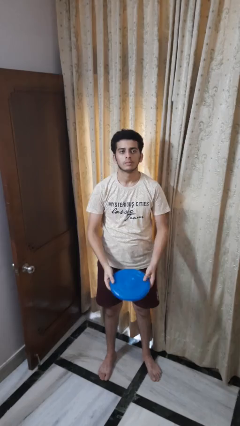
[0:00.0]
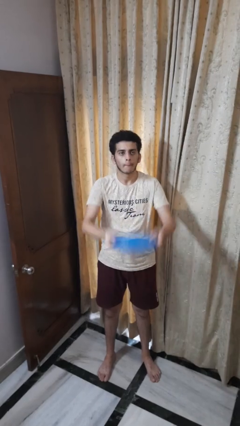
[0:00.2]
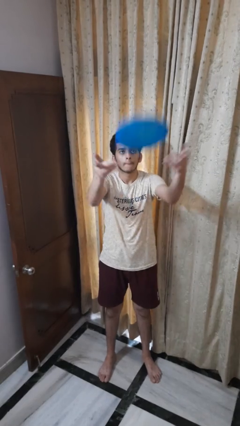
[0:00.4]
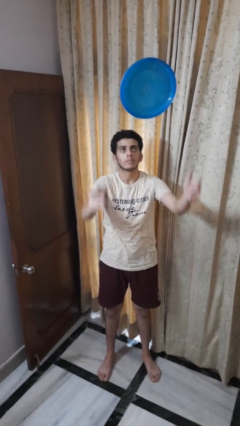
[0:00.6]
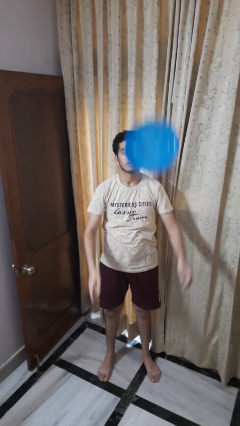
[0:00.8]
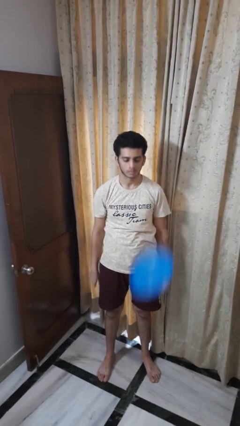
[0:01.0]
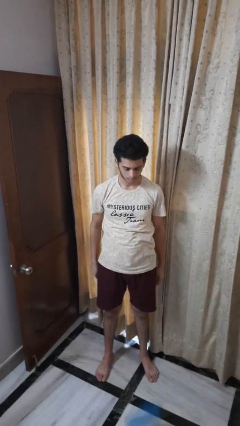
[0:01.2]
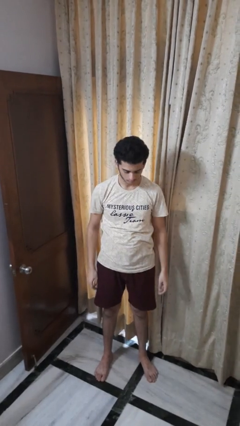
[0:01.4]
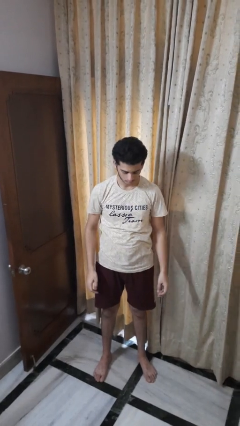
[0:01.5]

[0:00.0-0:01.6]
person throws object into air

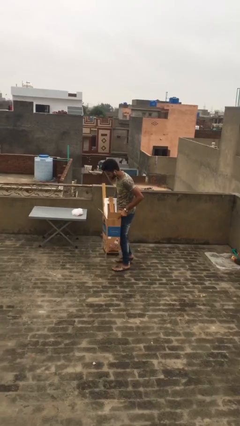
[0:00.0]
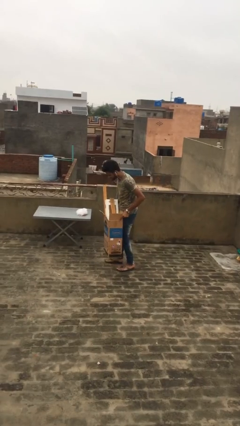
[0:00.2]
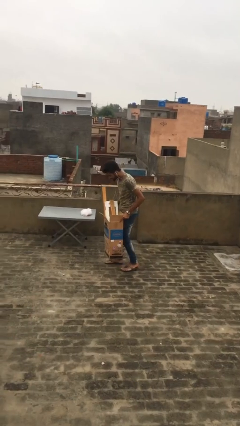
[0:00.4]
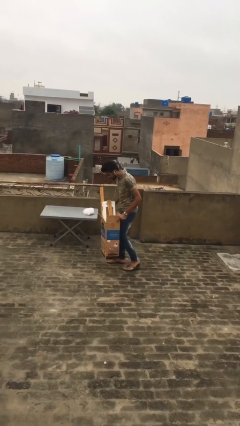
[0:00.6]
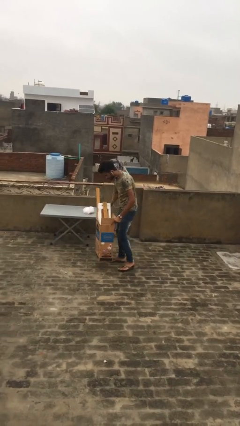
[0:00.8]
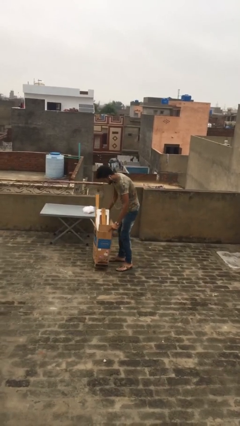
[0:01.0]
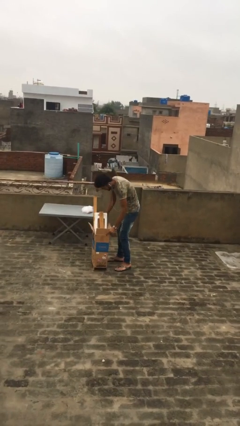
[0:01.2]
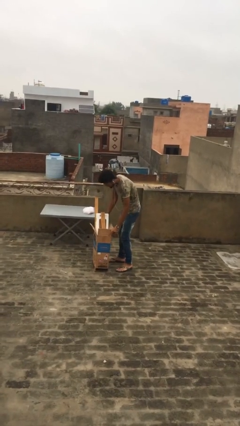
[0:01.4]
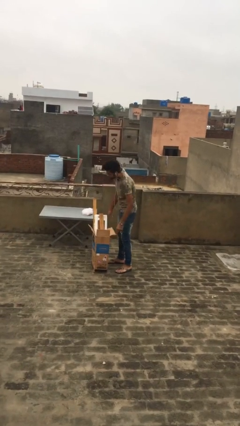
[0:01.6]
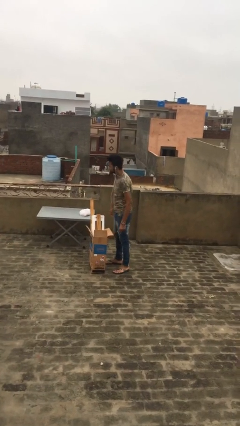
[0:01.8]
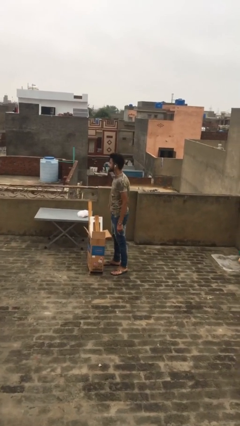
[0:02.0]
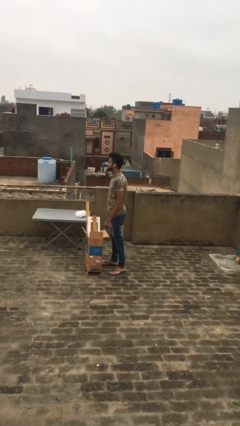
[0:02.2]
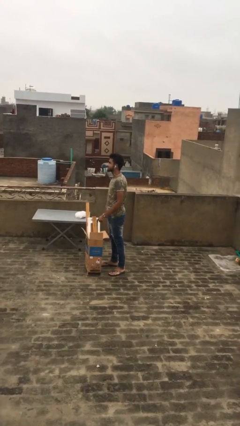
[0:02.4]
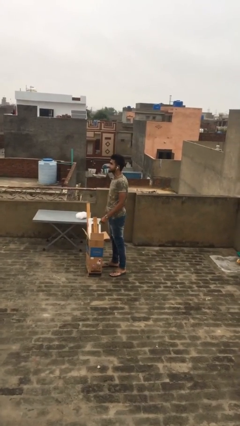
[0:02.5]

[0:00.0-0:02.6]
person puts down object on floor

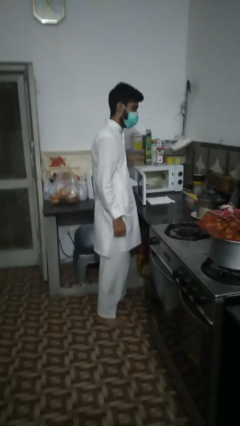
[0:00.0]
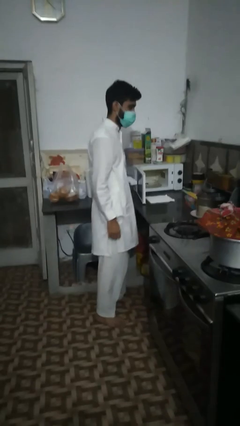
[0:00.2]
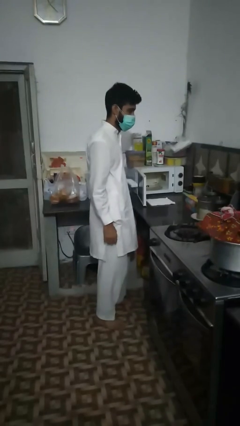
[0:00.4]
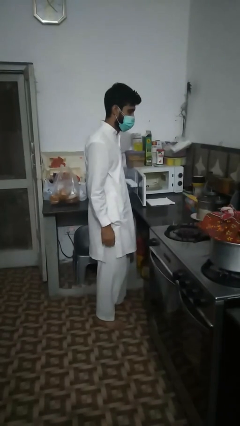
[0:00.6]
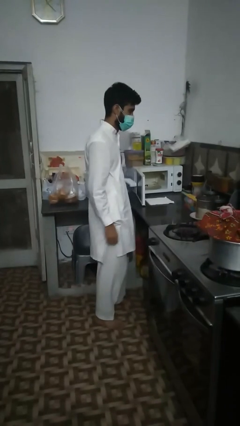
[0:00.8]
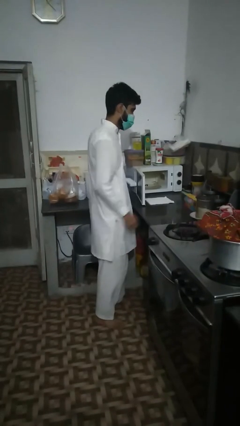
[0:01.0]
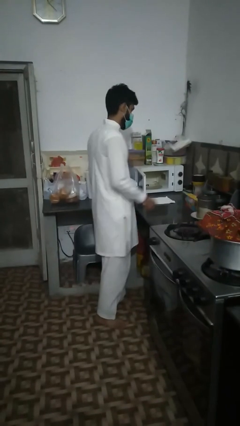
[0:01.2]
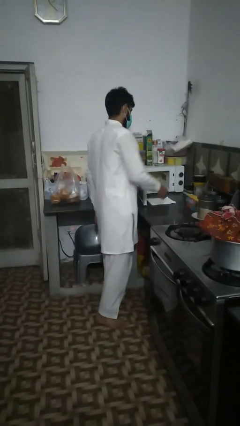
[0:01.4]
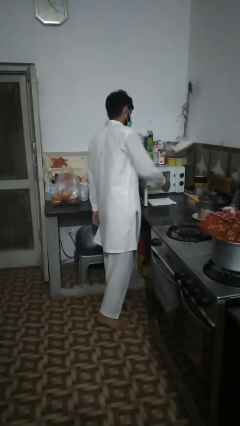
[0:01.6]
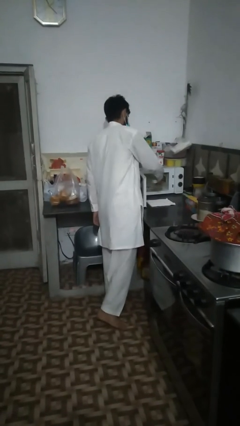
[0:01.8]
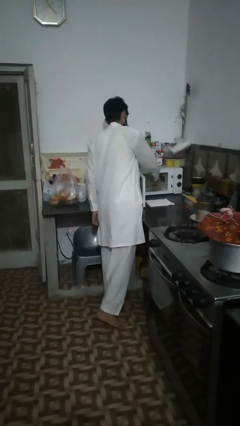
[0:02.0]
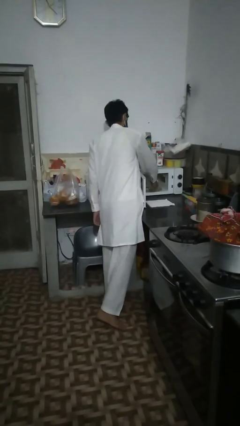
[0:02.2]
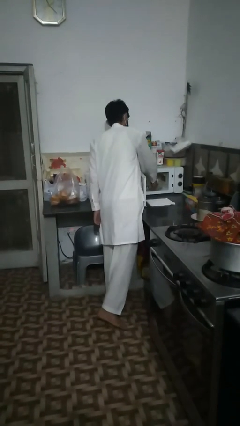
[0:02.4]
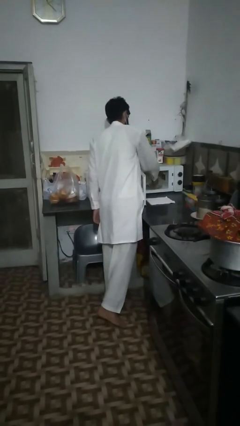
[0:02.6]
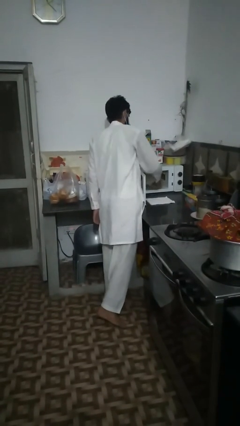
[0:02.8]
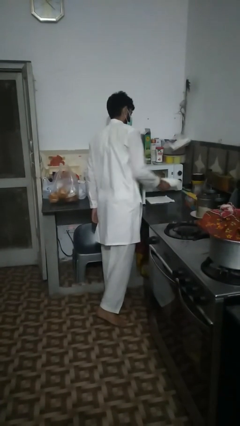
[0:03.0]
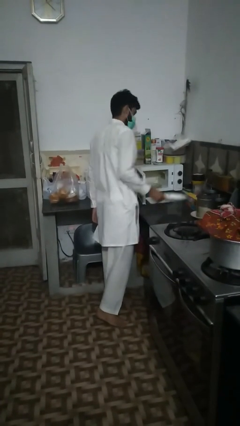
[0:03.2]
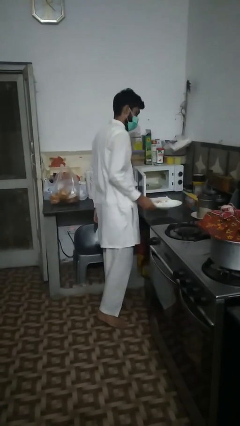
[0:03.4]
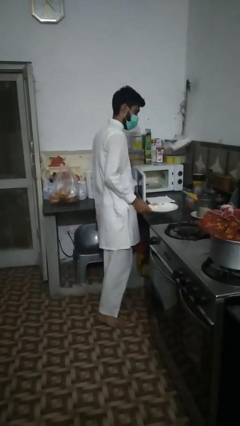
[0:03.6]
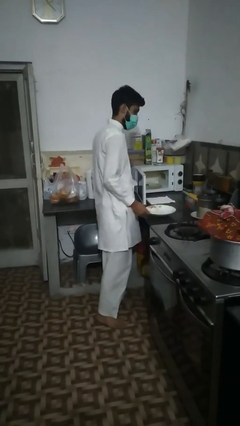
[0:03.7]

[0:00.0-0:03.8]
person takes object from microwave

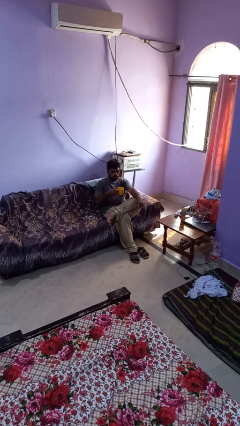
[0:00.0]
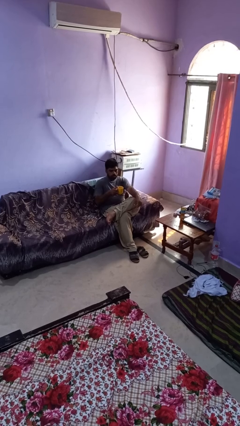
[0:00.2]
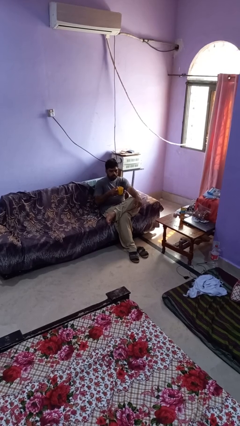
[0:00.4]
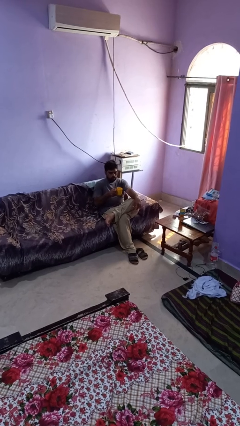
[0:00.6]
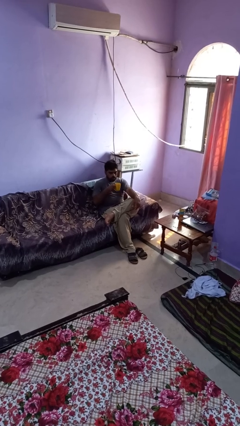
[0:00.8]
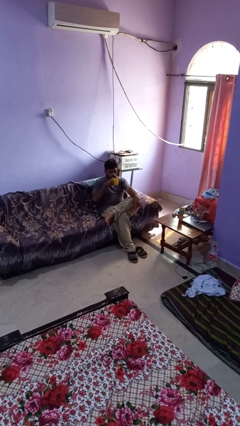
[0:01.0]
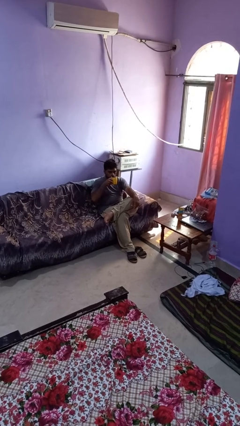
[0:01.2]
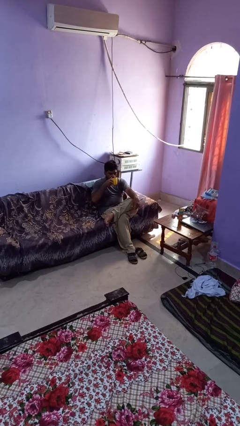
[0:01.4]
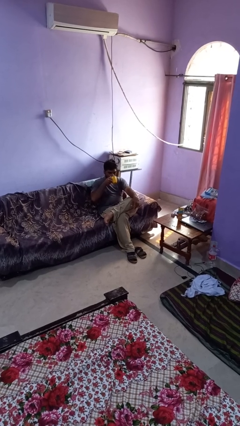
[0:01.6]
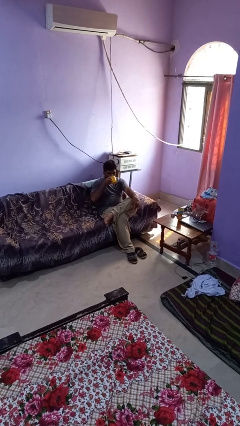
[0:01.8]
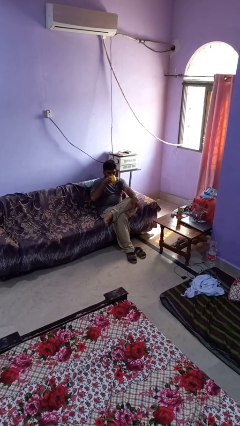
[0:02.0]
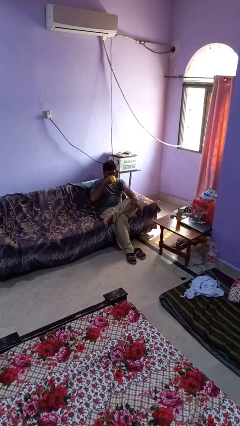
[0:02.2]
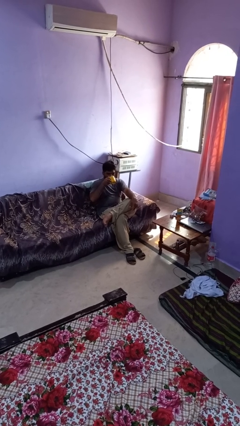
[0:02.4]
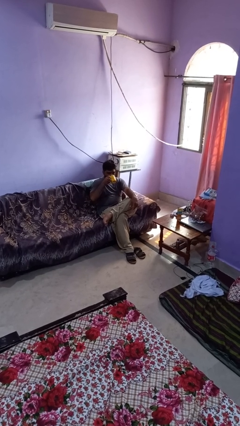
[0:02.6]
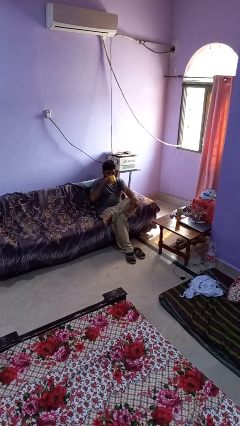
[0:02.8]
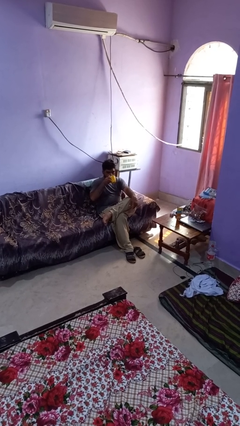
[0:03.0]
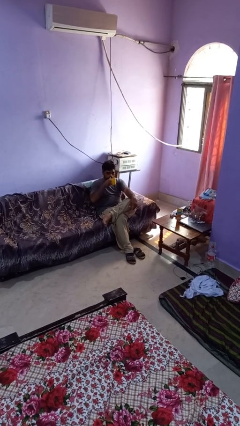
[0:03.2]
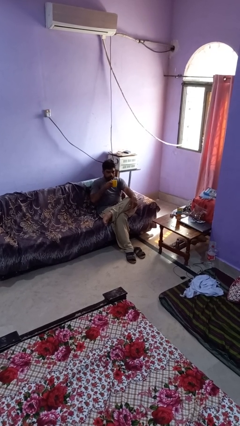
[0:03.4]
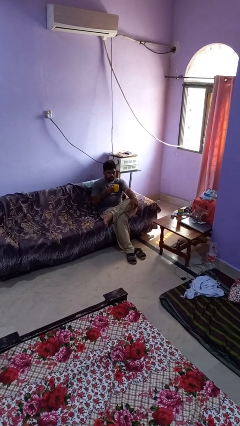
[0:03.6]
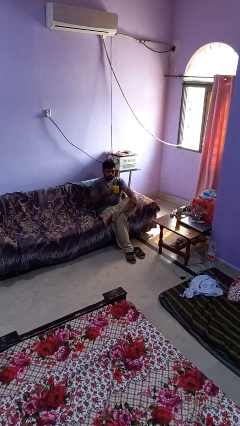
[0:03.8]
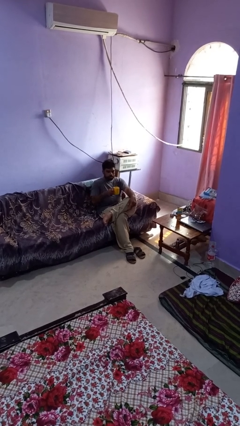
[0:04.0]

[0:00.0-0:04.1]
person drinks from mug

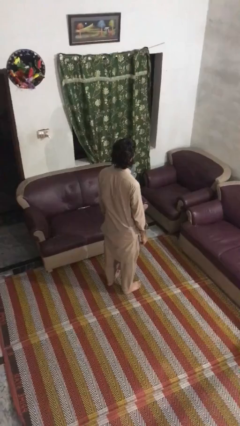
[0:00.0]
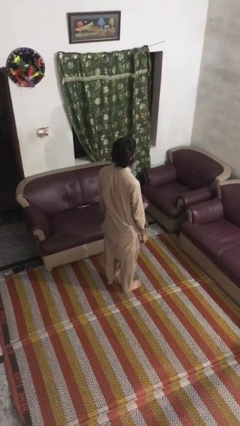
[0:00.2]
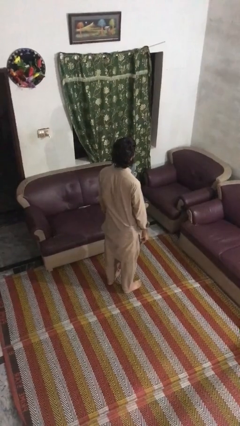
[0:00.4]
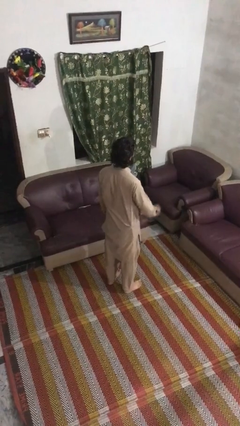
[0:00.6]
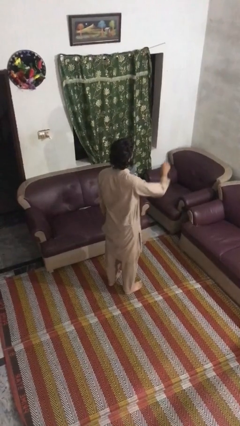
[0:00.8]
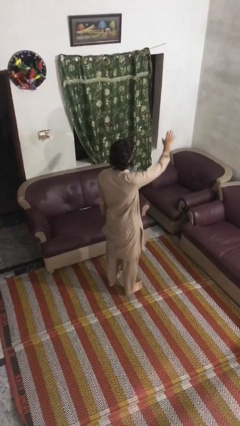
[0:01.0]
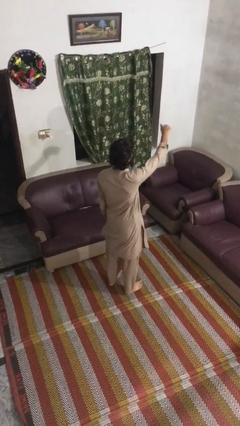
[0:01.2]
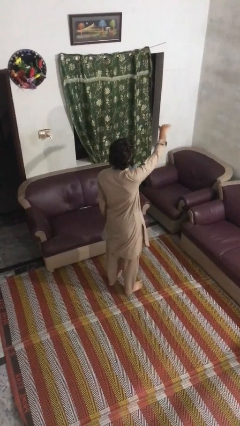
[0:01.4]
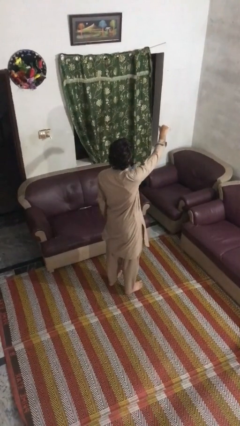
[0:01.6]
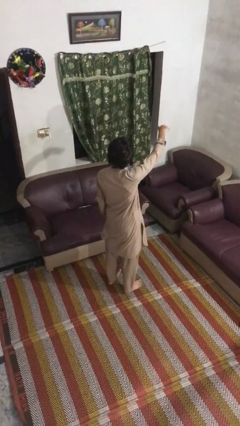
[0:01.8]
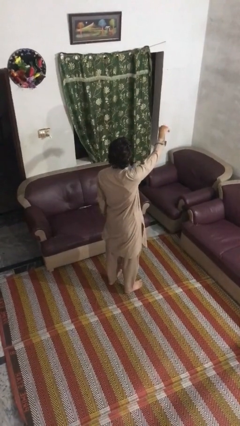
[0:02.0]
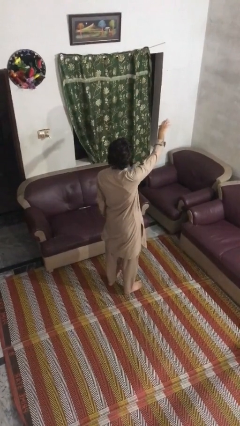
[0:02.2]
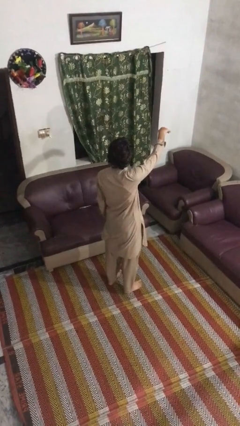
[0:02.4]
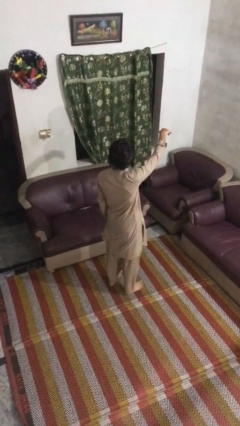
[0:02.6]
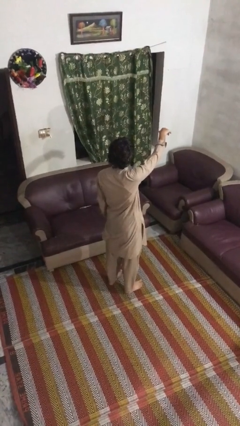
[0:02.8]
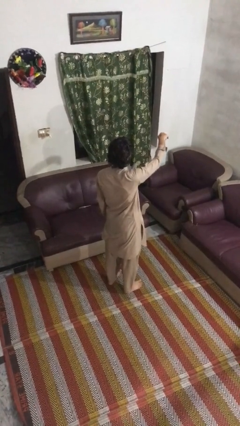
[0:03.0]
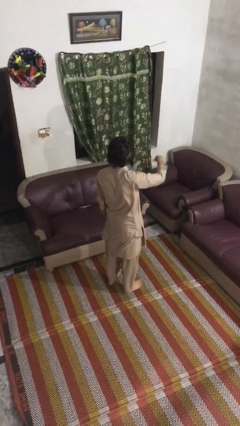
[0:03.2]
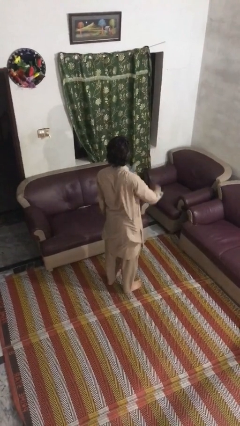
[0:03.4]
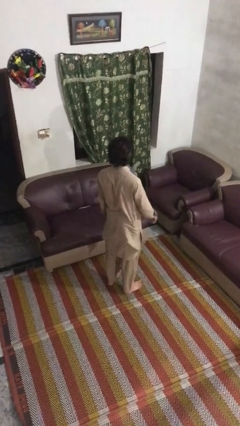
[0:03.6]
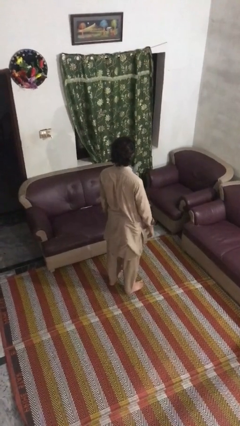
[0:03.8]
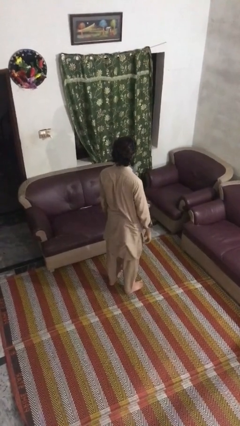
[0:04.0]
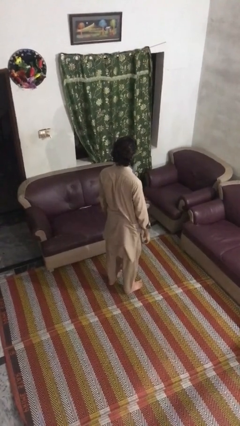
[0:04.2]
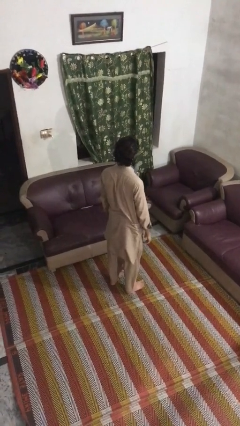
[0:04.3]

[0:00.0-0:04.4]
person gestures come here

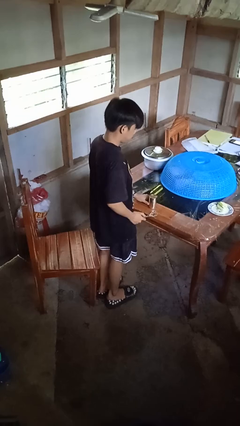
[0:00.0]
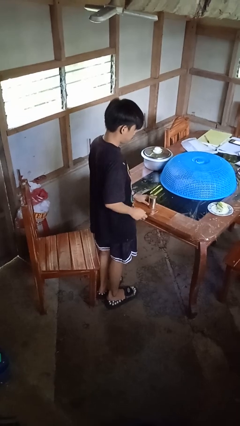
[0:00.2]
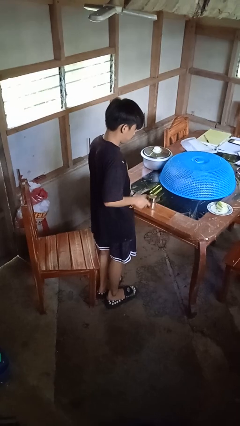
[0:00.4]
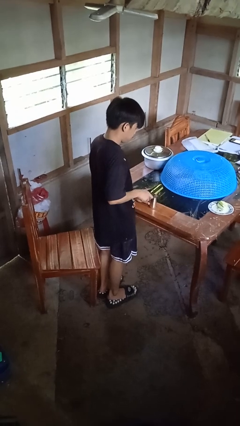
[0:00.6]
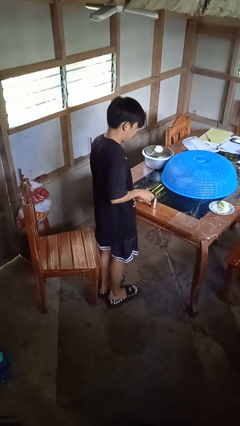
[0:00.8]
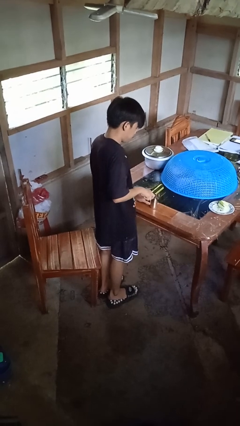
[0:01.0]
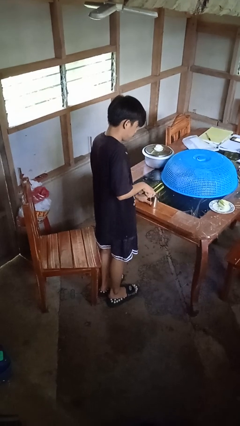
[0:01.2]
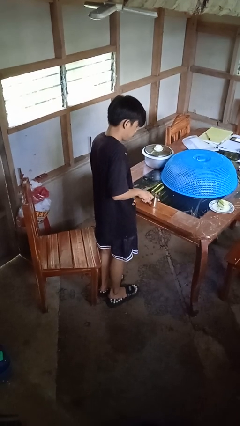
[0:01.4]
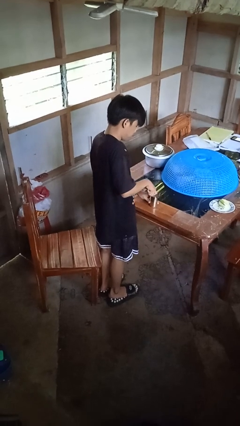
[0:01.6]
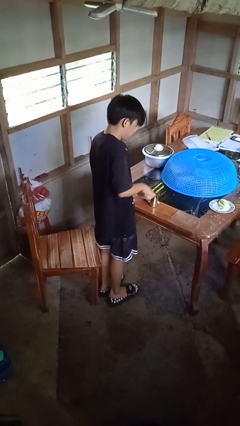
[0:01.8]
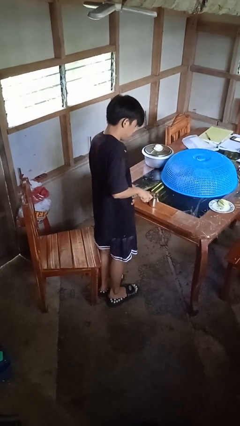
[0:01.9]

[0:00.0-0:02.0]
person opens can with can opener
